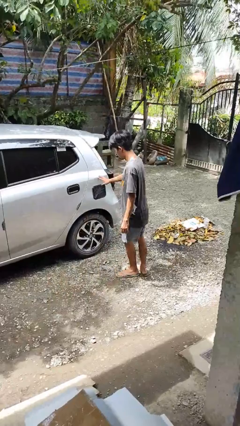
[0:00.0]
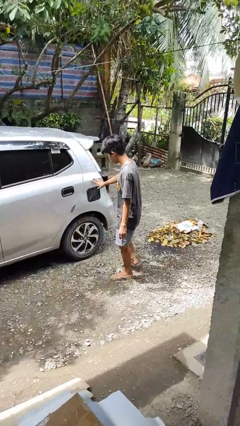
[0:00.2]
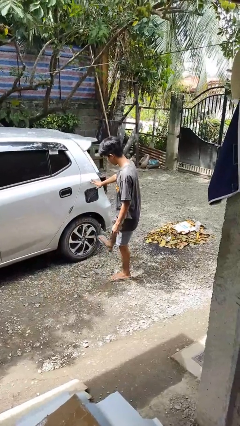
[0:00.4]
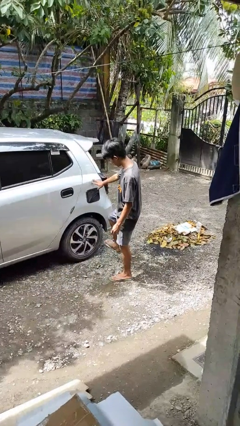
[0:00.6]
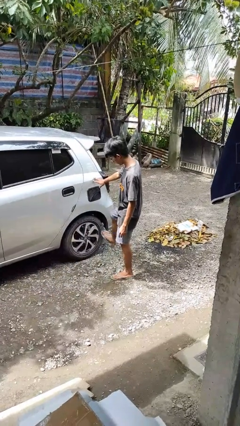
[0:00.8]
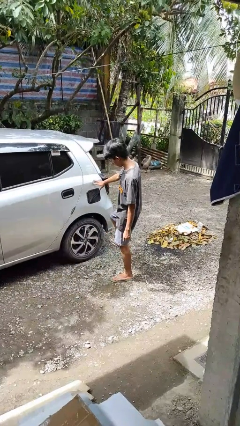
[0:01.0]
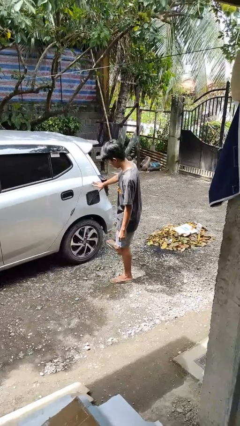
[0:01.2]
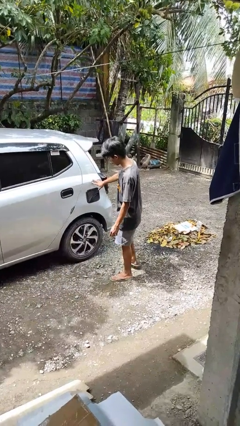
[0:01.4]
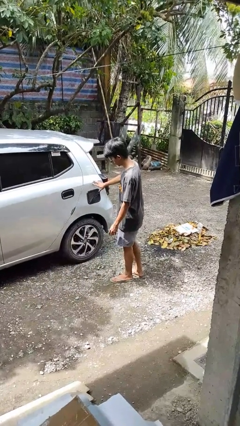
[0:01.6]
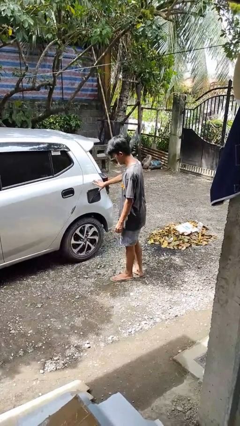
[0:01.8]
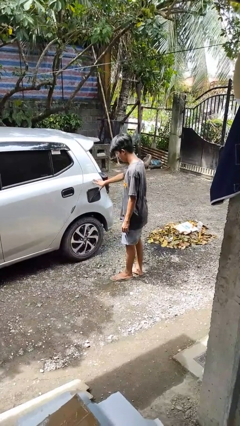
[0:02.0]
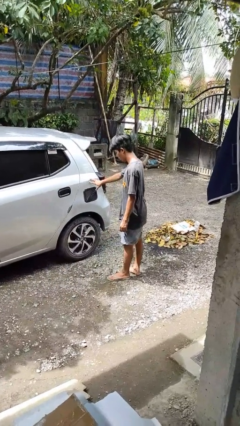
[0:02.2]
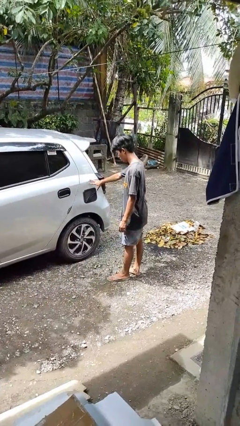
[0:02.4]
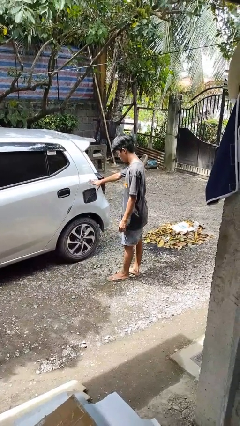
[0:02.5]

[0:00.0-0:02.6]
person kicks car tires

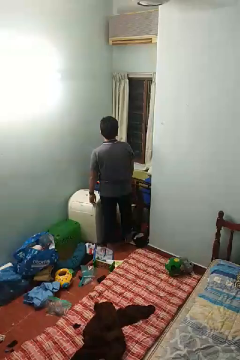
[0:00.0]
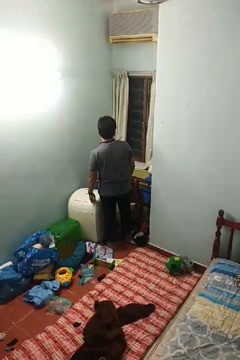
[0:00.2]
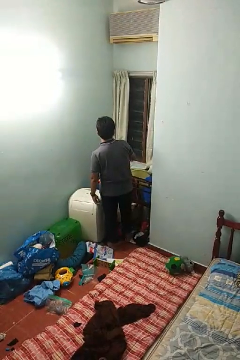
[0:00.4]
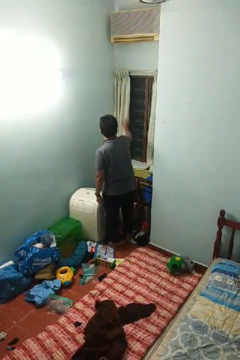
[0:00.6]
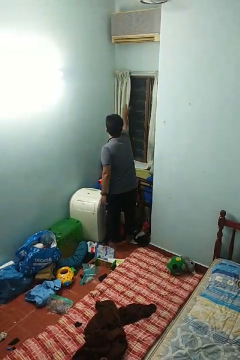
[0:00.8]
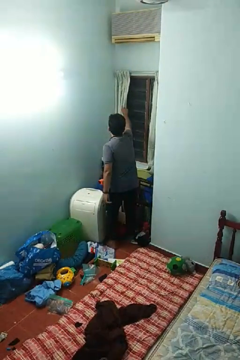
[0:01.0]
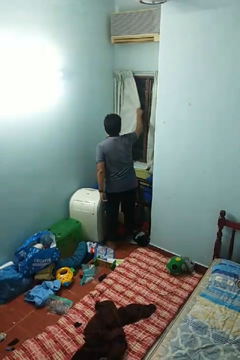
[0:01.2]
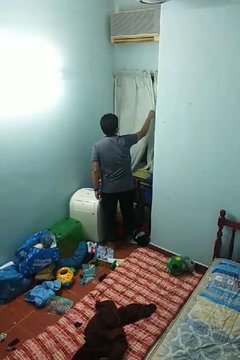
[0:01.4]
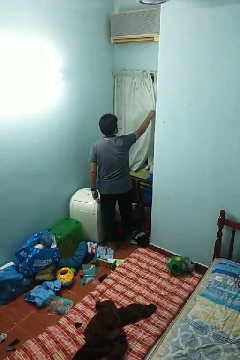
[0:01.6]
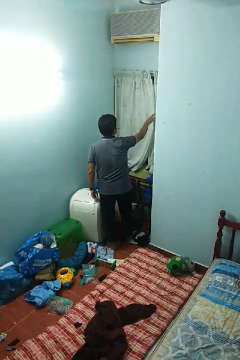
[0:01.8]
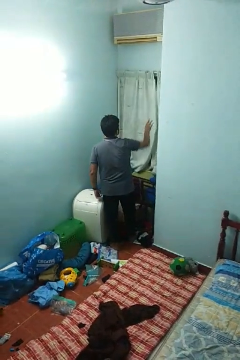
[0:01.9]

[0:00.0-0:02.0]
person closes curtains

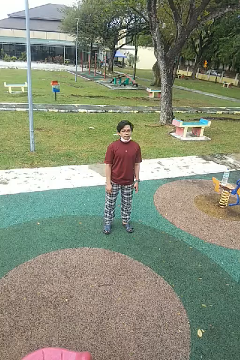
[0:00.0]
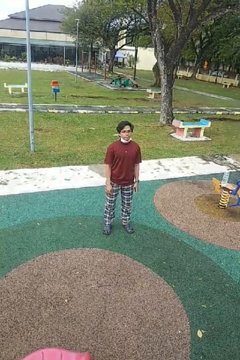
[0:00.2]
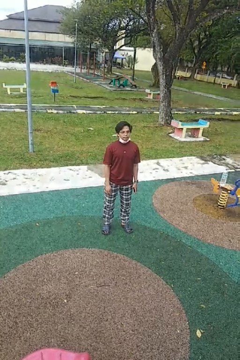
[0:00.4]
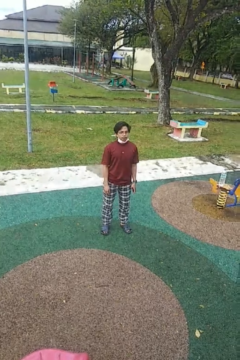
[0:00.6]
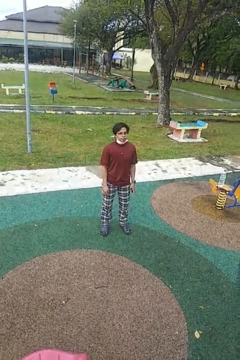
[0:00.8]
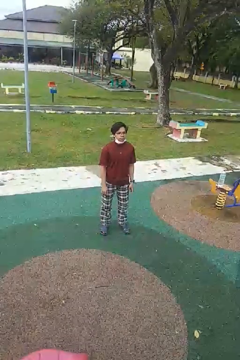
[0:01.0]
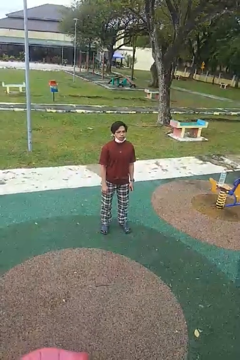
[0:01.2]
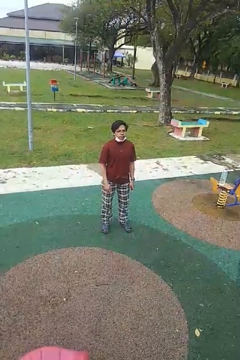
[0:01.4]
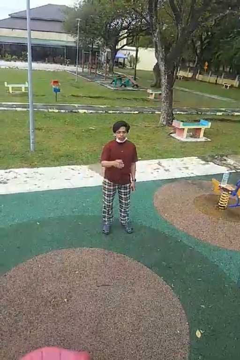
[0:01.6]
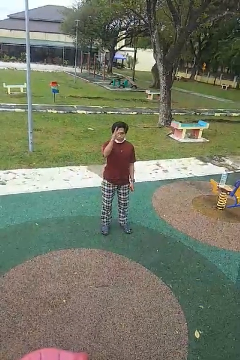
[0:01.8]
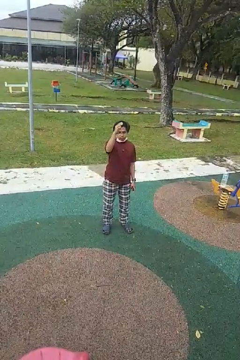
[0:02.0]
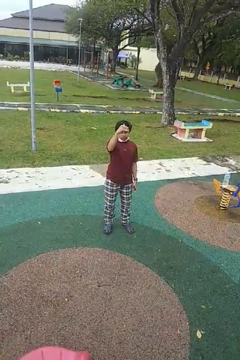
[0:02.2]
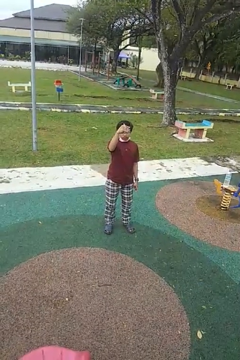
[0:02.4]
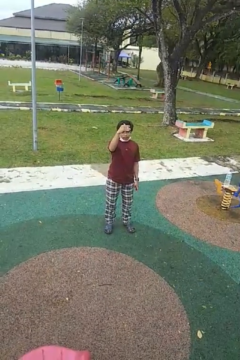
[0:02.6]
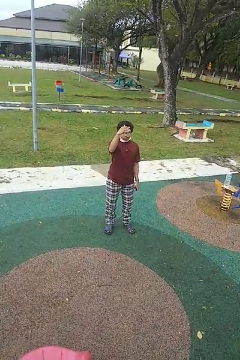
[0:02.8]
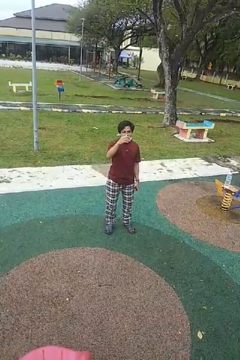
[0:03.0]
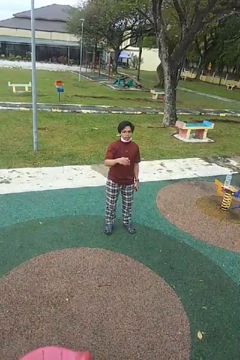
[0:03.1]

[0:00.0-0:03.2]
person gestures come here

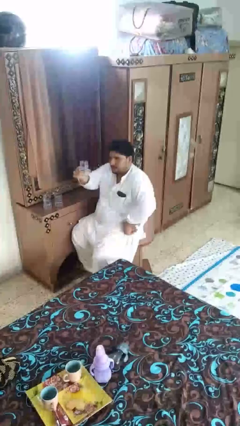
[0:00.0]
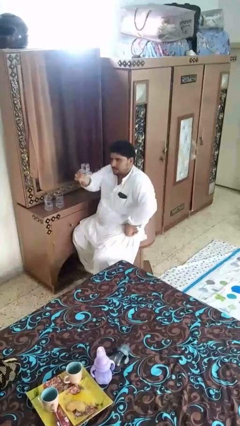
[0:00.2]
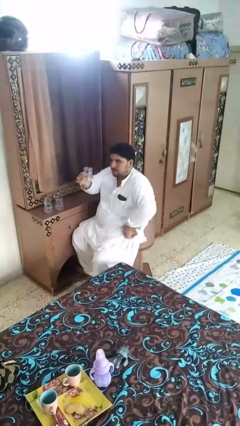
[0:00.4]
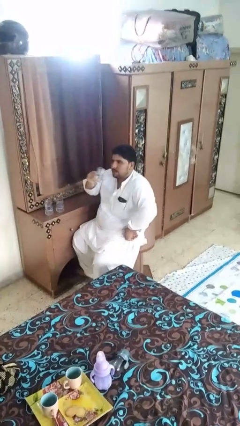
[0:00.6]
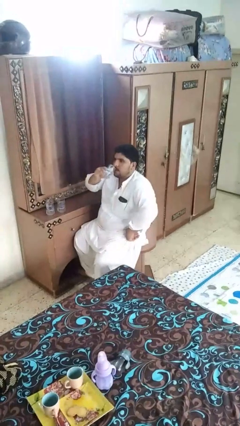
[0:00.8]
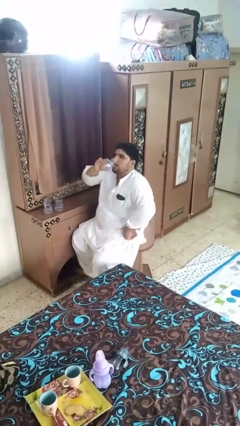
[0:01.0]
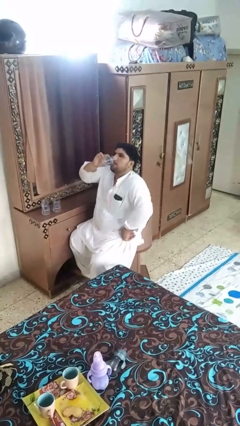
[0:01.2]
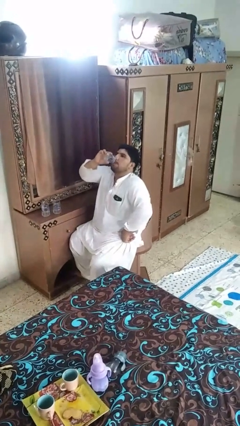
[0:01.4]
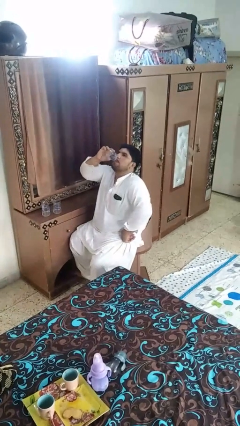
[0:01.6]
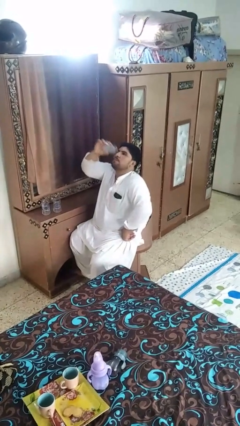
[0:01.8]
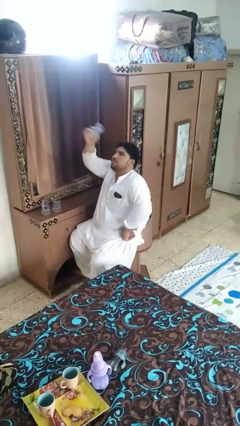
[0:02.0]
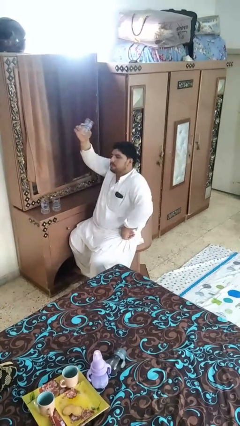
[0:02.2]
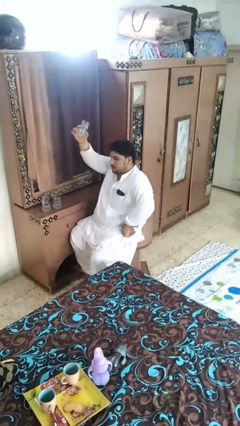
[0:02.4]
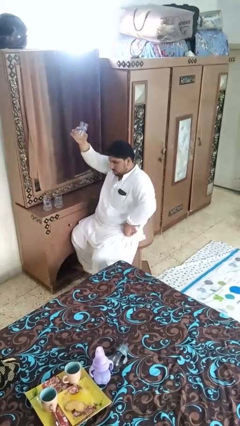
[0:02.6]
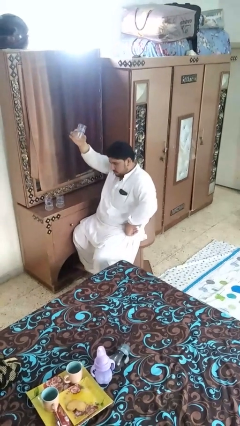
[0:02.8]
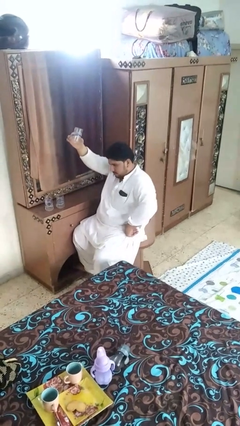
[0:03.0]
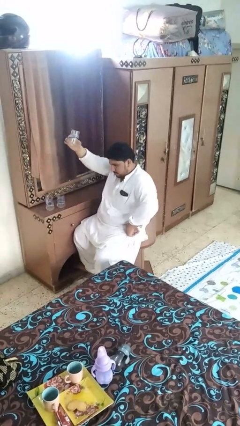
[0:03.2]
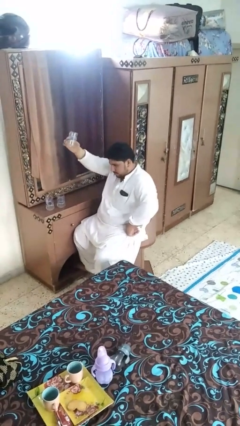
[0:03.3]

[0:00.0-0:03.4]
person drinks from shotglass

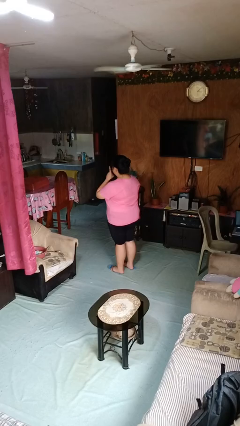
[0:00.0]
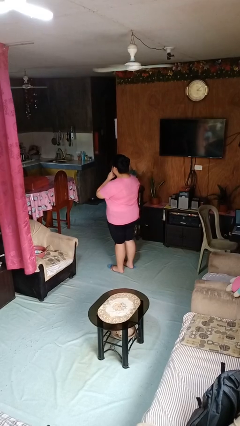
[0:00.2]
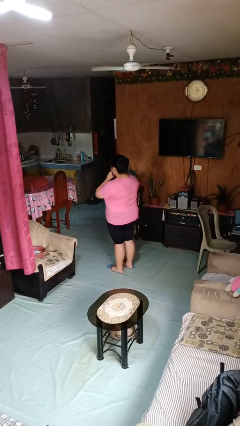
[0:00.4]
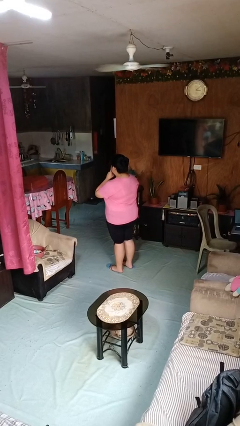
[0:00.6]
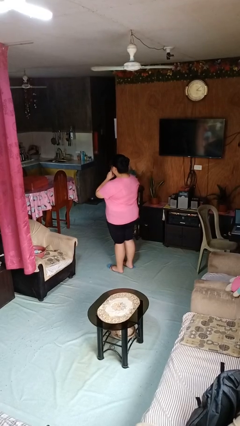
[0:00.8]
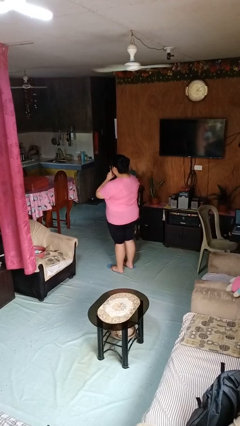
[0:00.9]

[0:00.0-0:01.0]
person gestures blow kiss

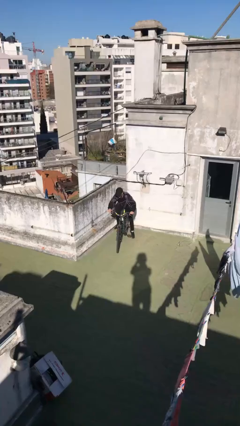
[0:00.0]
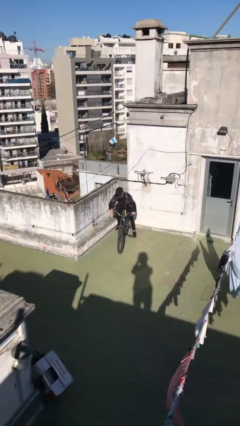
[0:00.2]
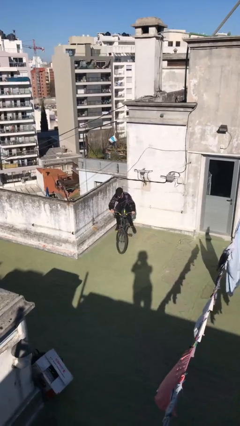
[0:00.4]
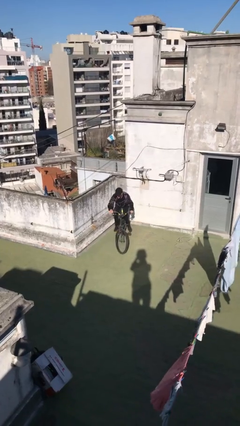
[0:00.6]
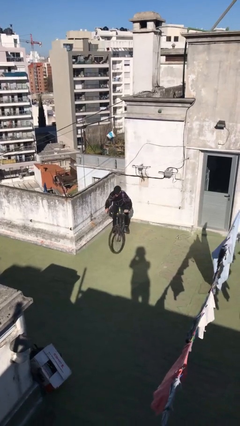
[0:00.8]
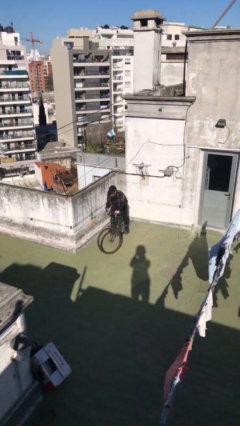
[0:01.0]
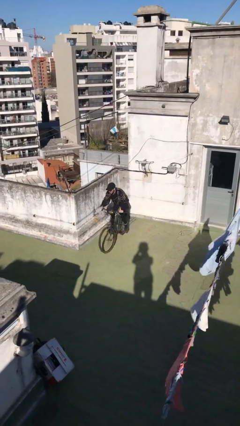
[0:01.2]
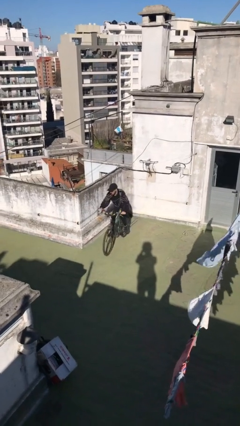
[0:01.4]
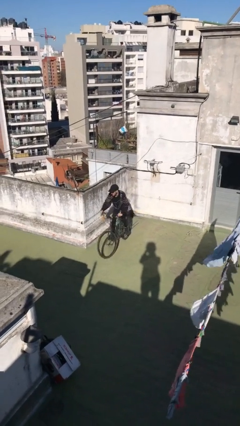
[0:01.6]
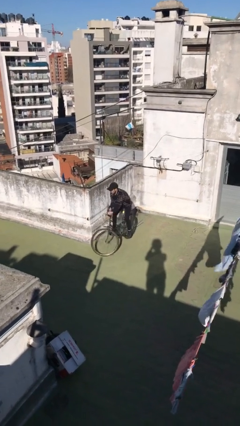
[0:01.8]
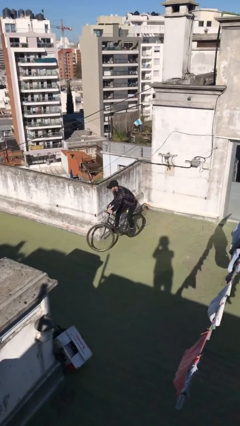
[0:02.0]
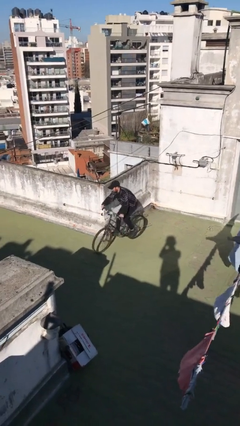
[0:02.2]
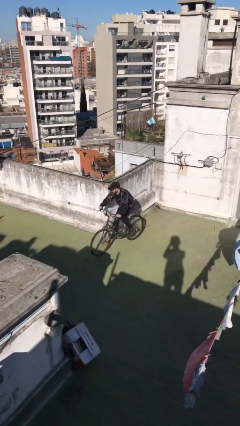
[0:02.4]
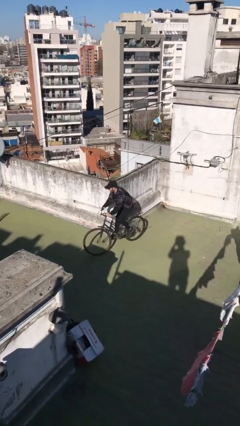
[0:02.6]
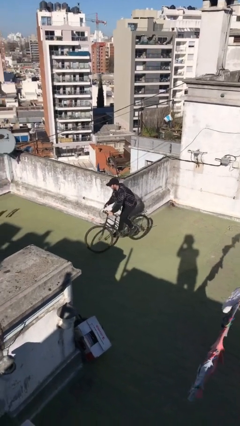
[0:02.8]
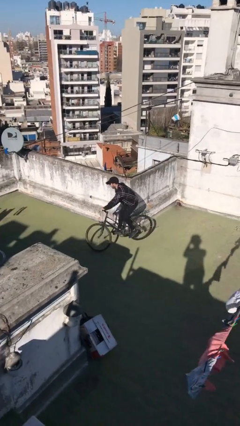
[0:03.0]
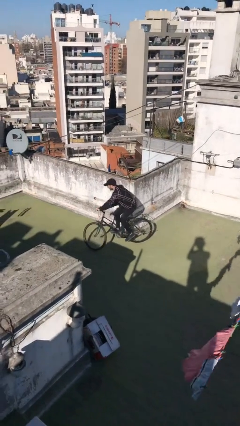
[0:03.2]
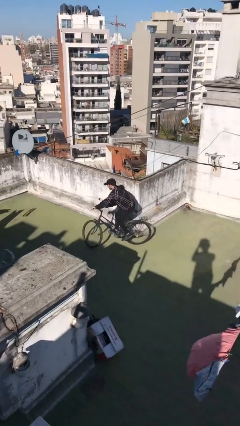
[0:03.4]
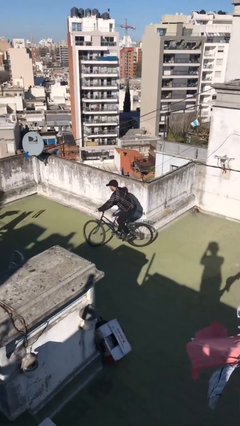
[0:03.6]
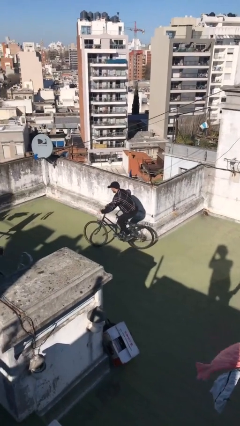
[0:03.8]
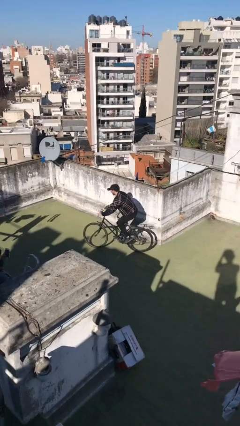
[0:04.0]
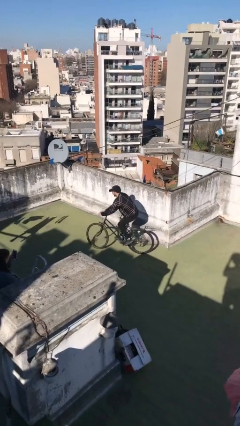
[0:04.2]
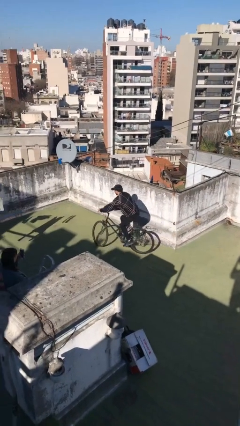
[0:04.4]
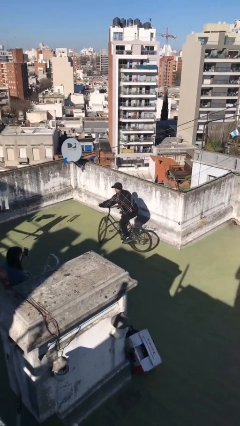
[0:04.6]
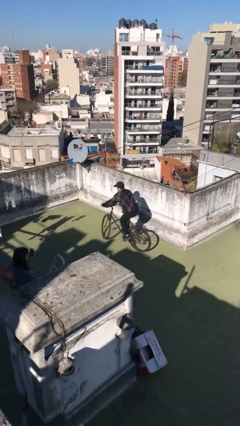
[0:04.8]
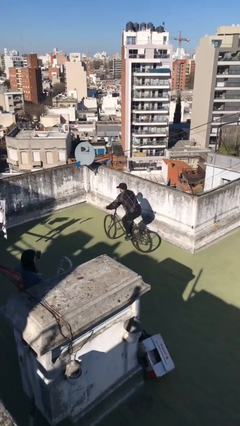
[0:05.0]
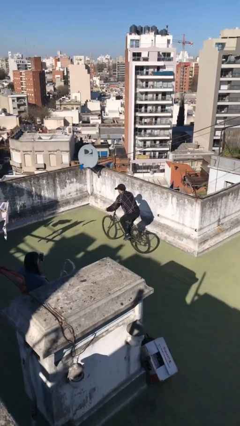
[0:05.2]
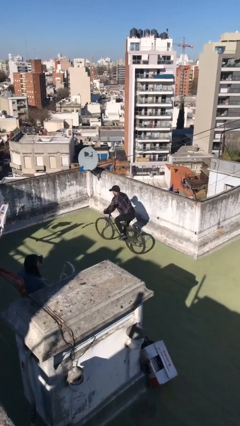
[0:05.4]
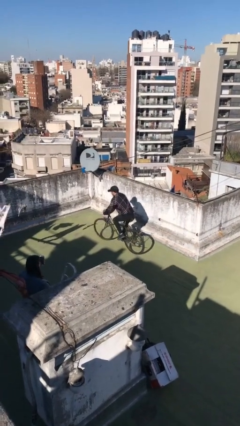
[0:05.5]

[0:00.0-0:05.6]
person rides bicycle
